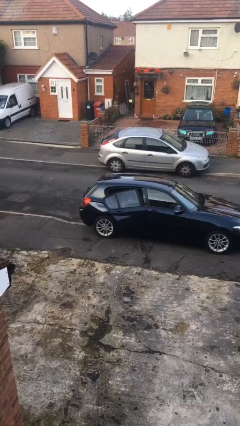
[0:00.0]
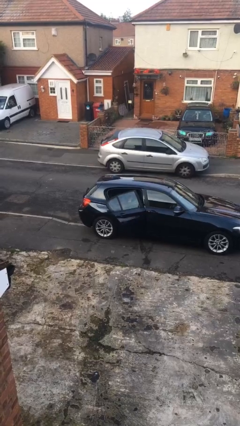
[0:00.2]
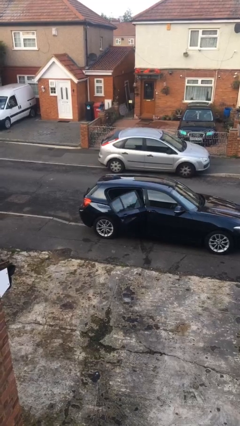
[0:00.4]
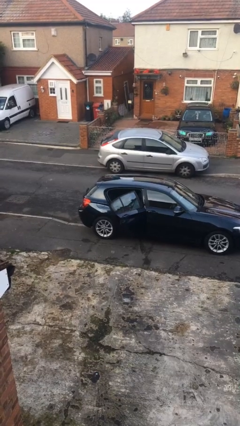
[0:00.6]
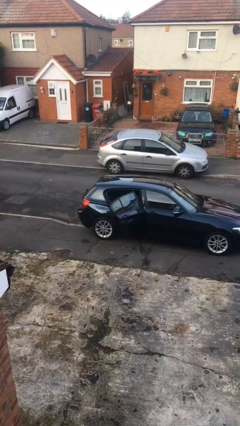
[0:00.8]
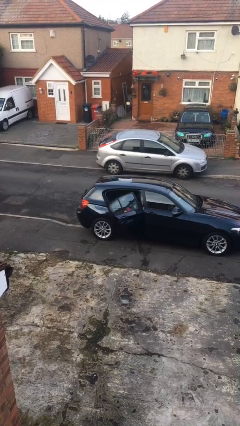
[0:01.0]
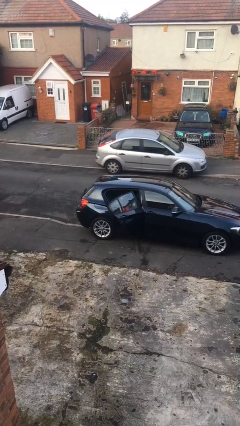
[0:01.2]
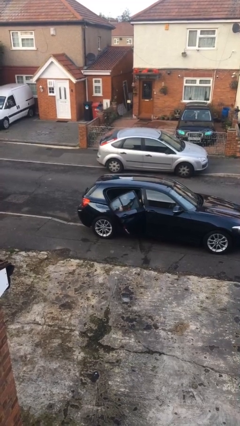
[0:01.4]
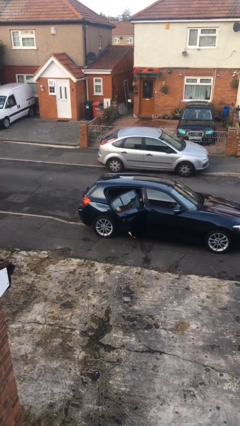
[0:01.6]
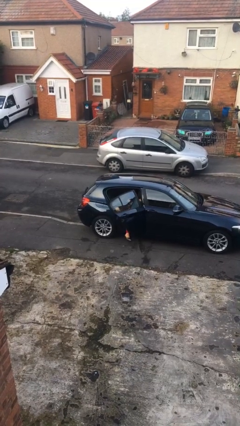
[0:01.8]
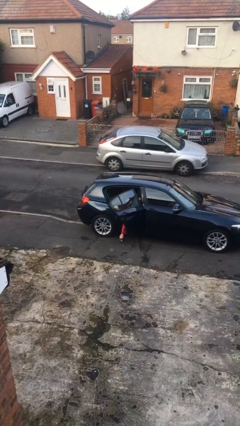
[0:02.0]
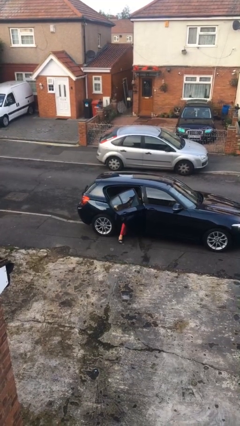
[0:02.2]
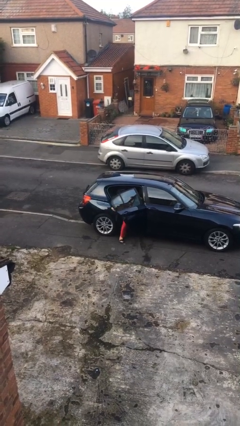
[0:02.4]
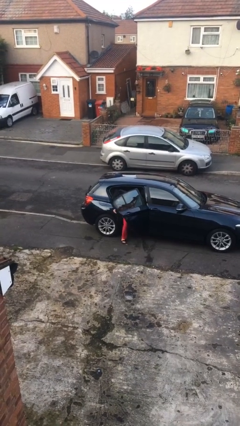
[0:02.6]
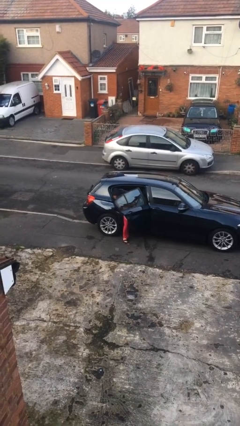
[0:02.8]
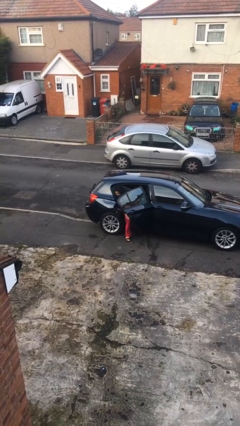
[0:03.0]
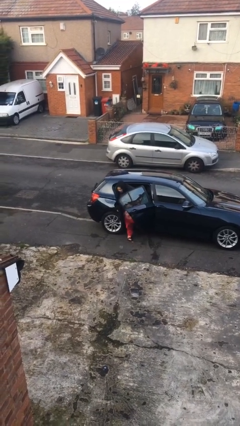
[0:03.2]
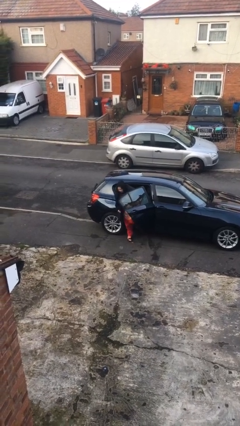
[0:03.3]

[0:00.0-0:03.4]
person exits car

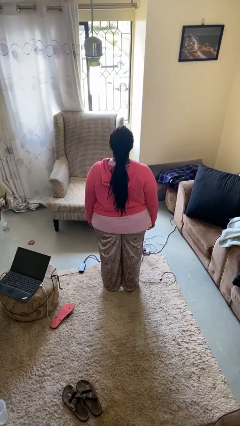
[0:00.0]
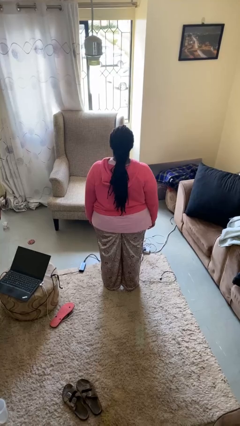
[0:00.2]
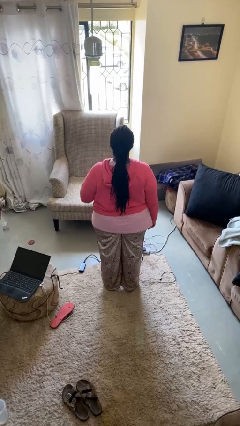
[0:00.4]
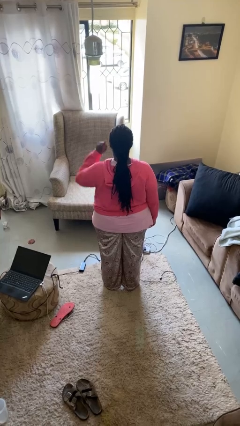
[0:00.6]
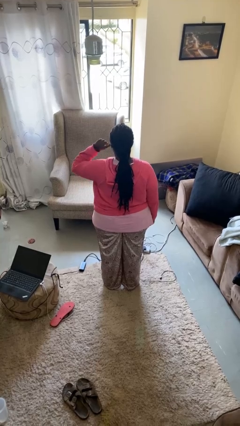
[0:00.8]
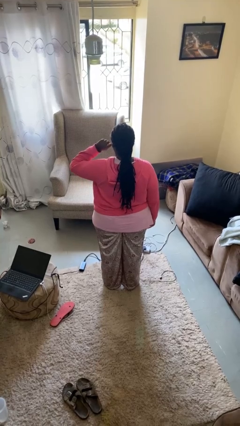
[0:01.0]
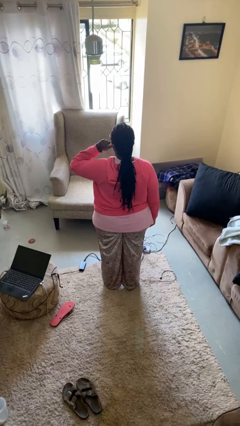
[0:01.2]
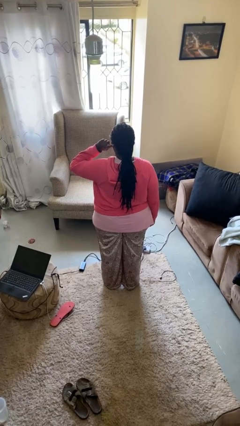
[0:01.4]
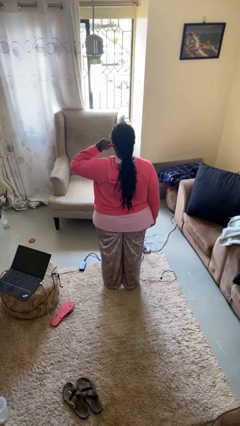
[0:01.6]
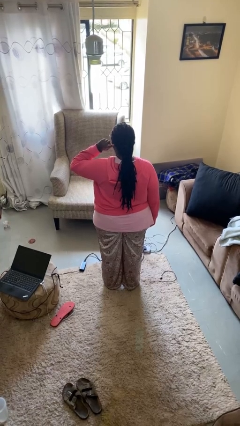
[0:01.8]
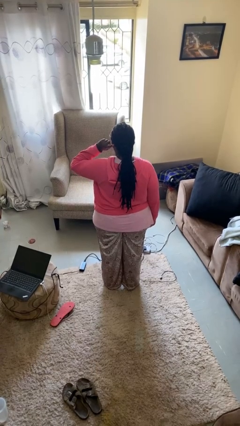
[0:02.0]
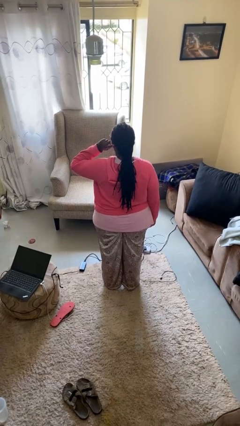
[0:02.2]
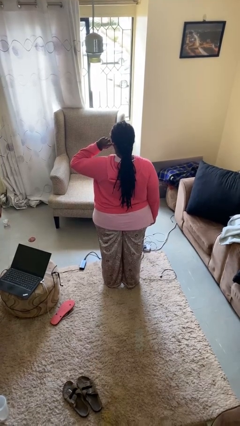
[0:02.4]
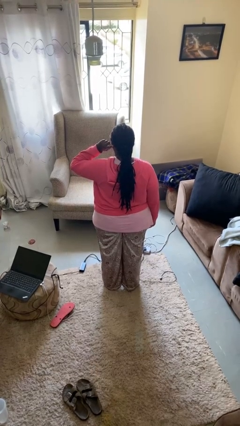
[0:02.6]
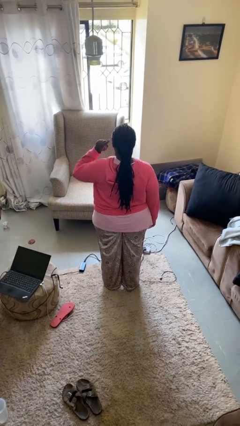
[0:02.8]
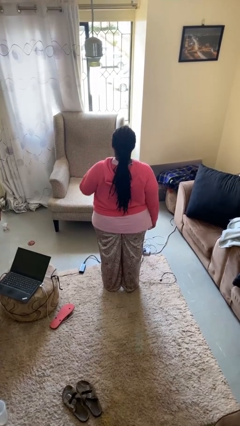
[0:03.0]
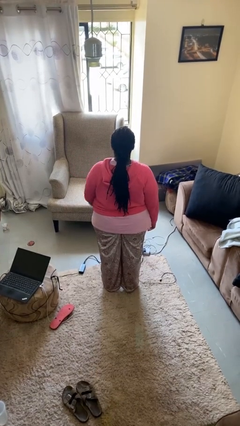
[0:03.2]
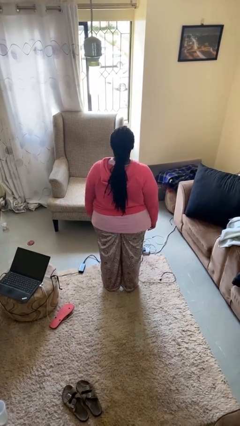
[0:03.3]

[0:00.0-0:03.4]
person gestures listen closely

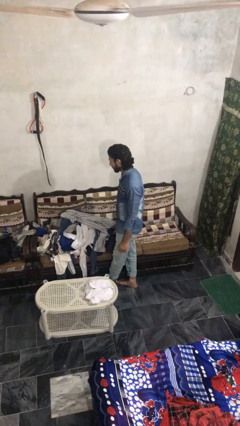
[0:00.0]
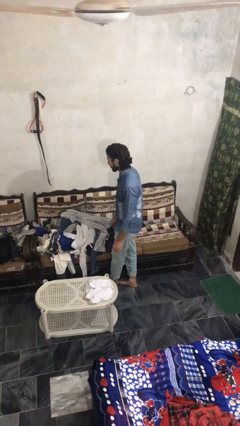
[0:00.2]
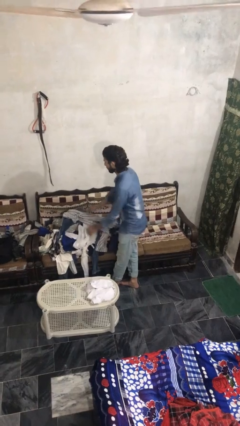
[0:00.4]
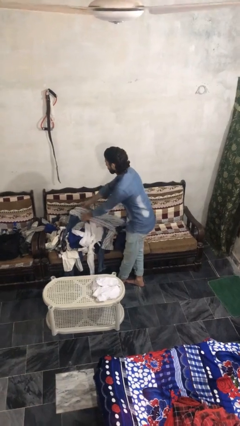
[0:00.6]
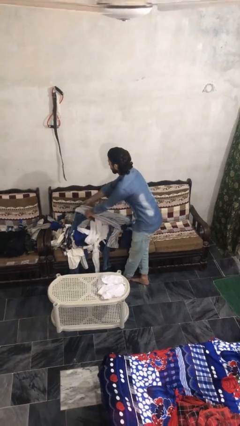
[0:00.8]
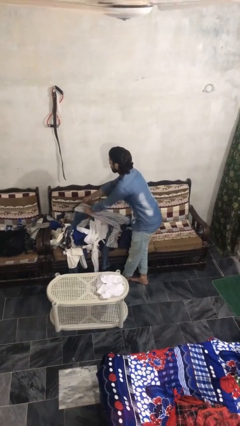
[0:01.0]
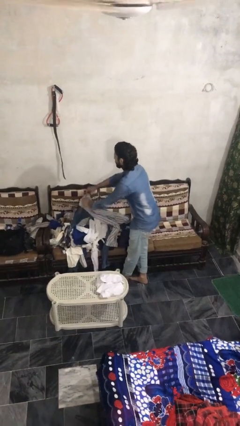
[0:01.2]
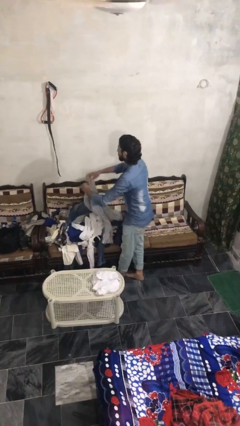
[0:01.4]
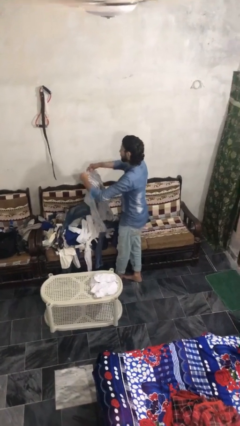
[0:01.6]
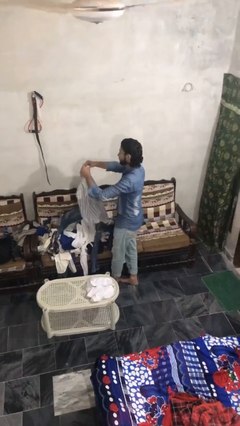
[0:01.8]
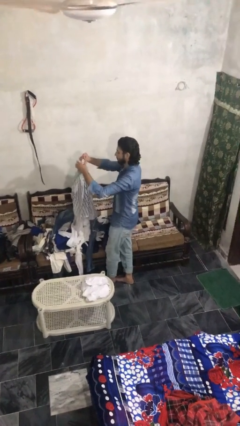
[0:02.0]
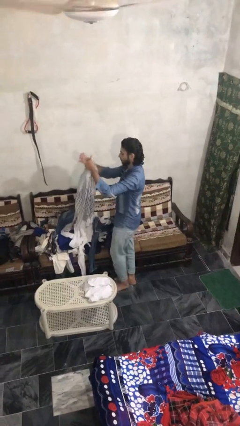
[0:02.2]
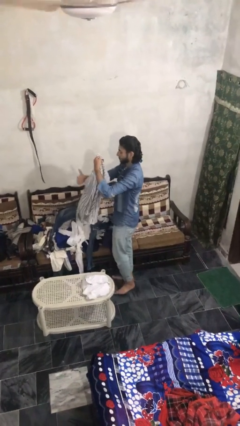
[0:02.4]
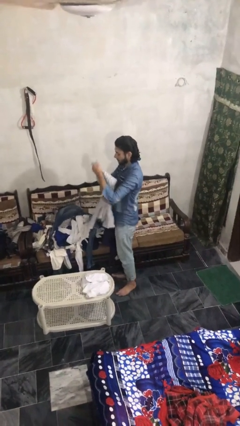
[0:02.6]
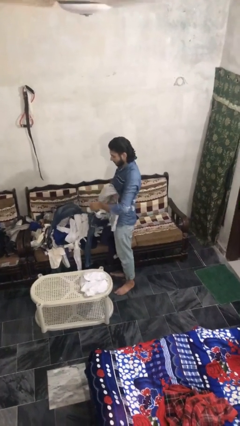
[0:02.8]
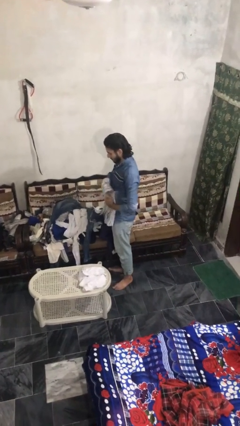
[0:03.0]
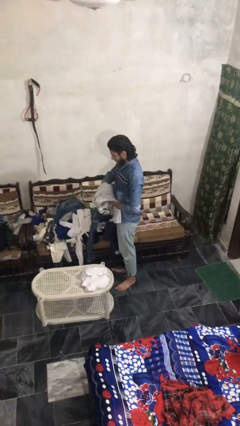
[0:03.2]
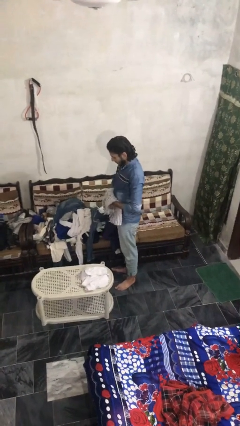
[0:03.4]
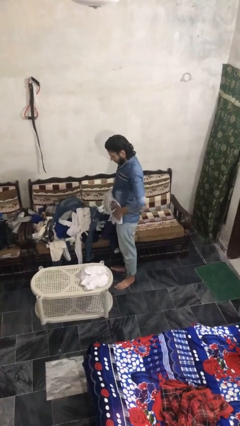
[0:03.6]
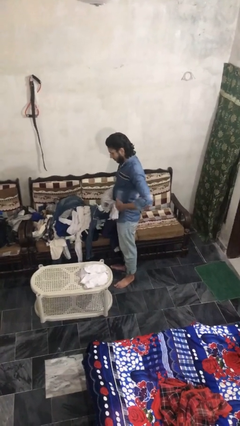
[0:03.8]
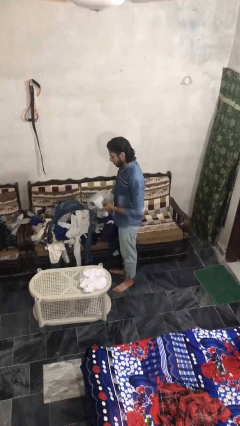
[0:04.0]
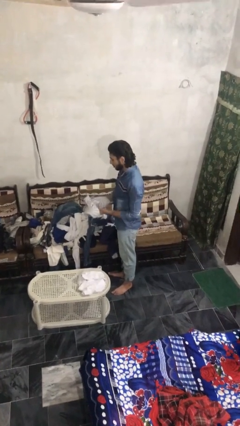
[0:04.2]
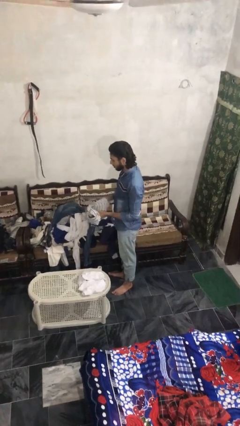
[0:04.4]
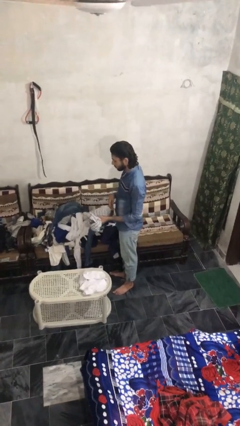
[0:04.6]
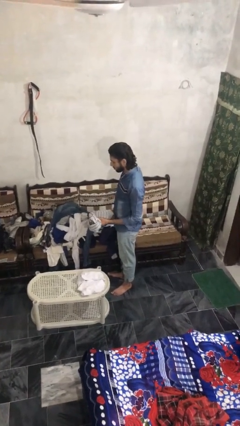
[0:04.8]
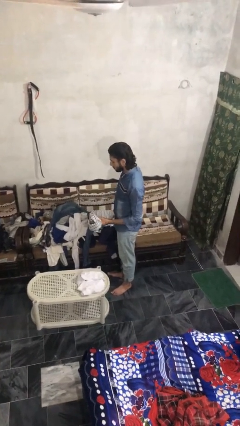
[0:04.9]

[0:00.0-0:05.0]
person folds shirt

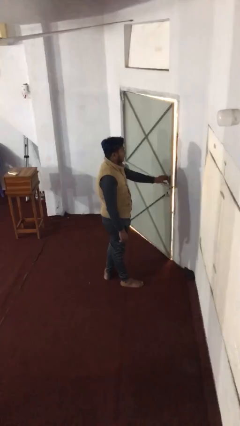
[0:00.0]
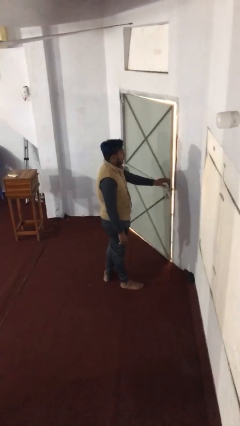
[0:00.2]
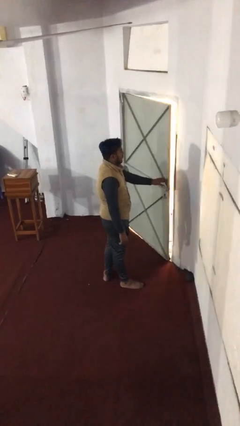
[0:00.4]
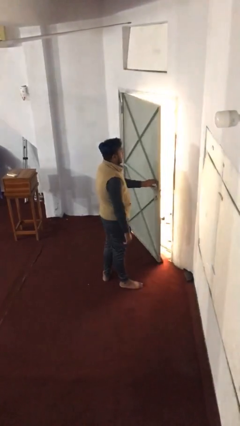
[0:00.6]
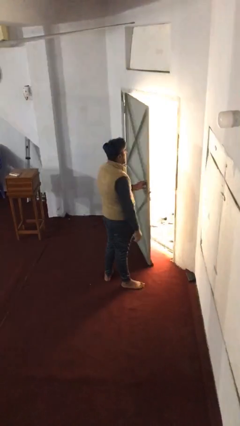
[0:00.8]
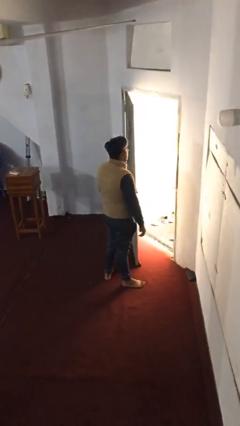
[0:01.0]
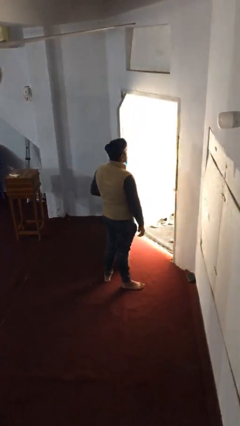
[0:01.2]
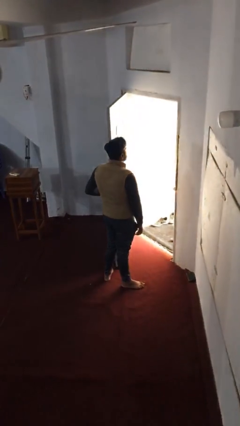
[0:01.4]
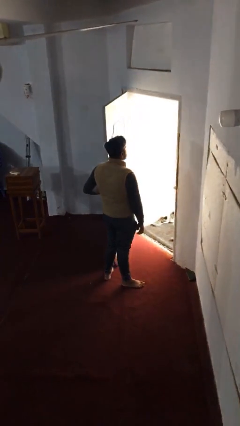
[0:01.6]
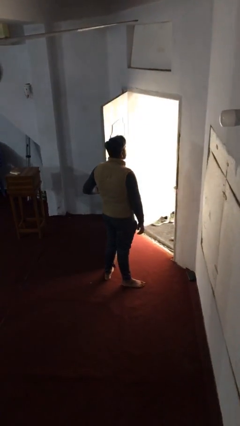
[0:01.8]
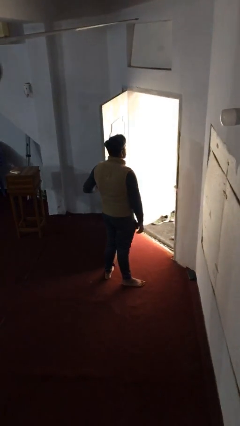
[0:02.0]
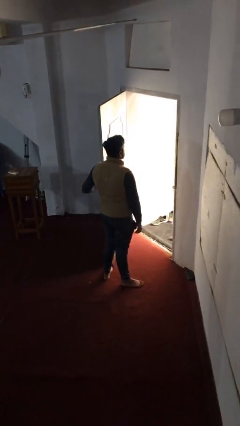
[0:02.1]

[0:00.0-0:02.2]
person opens facility door

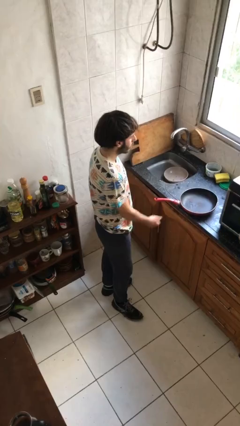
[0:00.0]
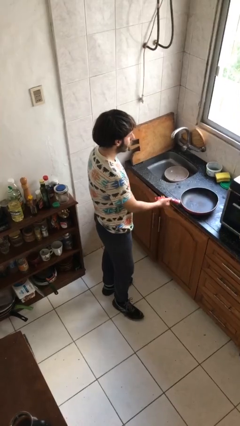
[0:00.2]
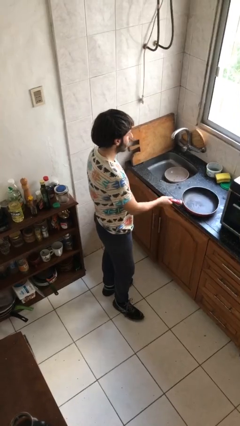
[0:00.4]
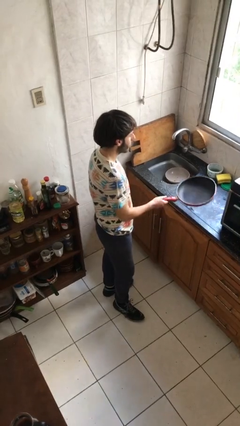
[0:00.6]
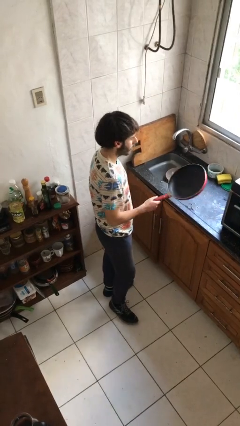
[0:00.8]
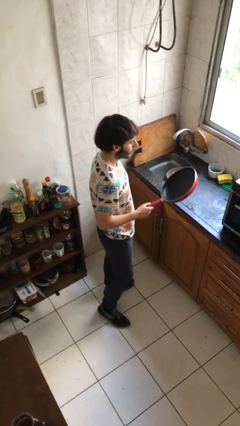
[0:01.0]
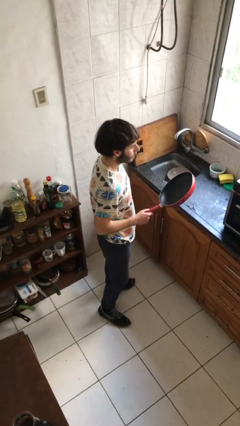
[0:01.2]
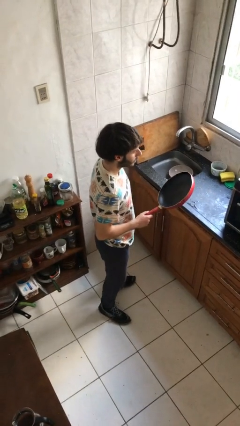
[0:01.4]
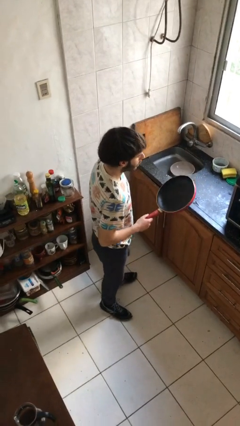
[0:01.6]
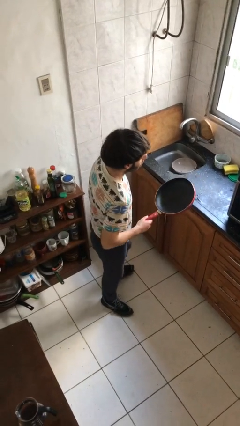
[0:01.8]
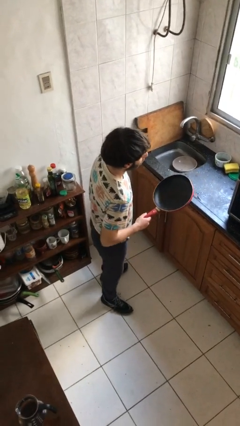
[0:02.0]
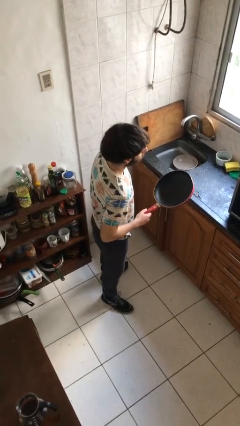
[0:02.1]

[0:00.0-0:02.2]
person picks up object from countertop

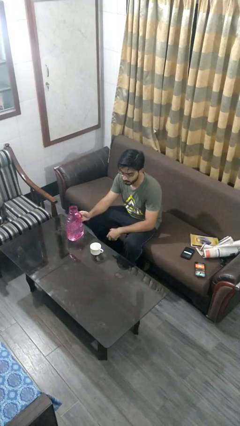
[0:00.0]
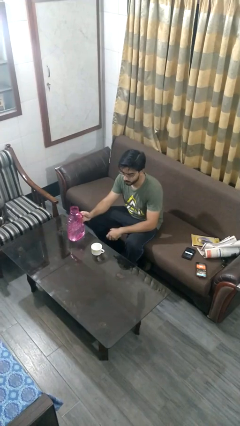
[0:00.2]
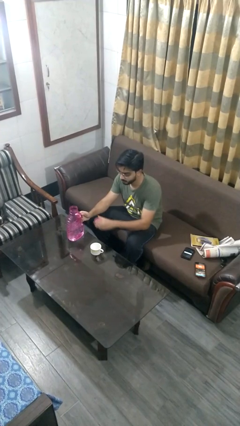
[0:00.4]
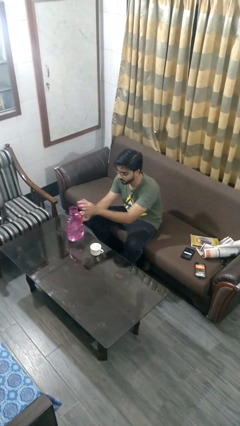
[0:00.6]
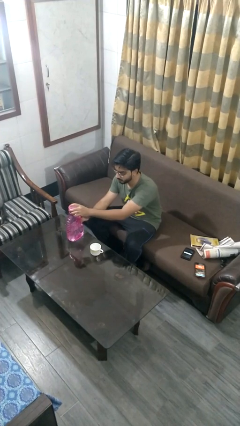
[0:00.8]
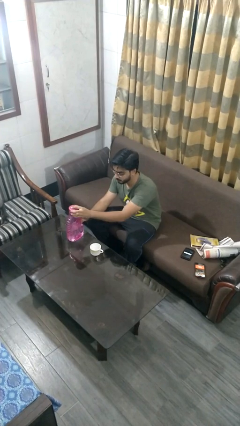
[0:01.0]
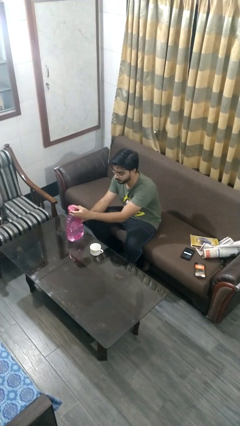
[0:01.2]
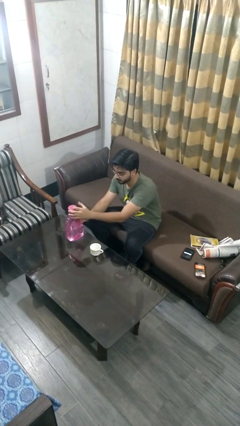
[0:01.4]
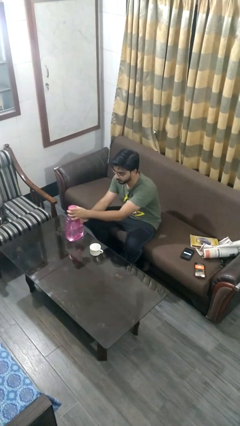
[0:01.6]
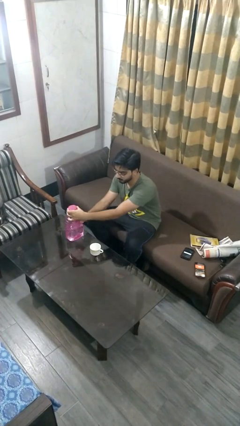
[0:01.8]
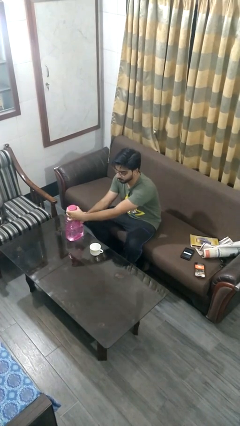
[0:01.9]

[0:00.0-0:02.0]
person screws lid to bottle
